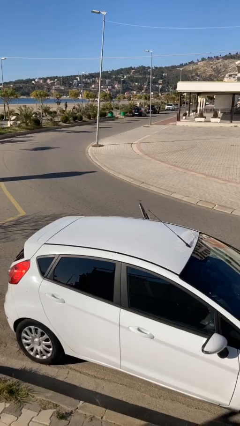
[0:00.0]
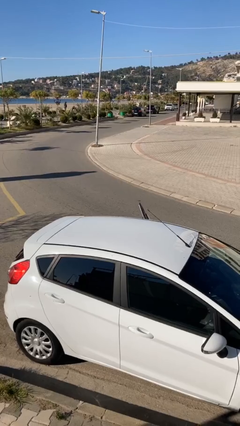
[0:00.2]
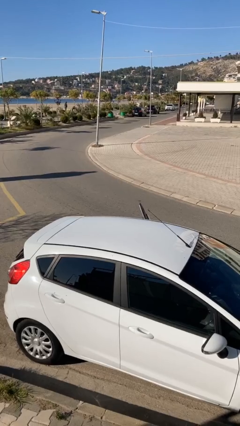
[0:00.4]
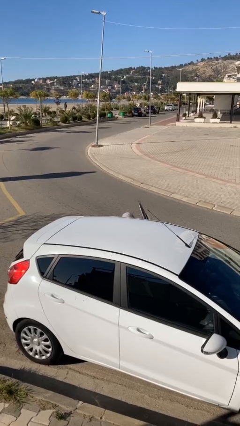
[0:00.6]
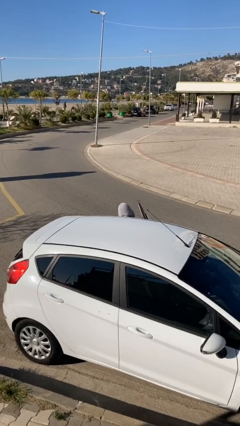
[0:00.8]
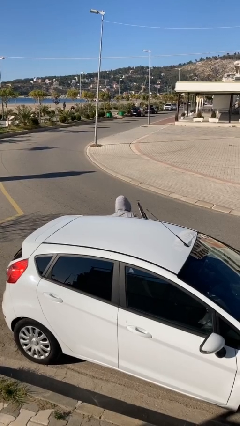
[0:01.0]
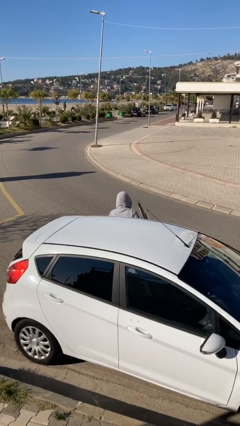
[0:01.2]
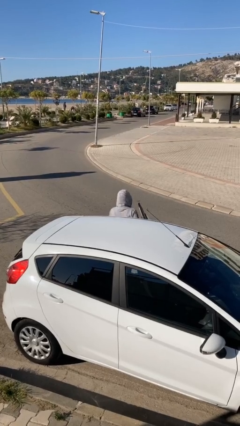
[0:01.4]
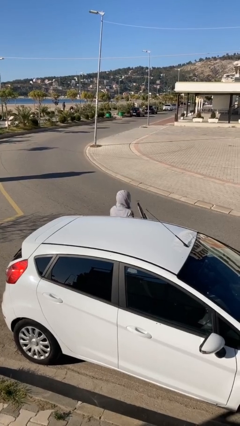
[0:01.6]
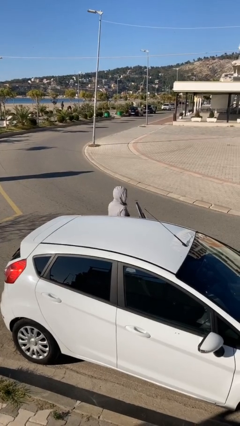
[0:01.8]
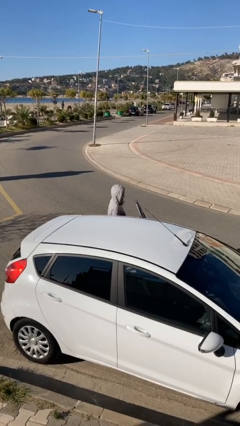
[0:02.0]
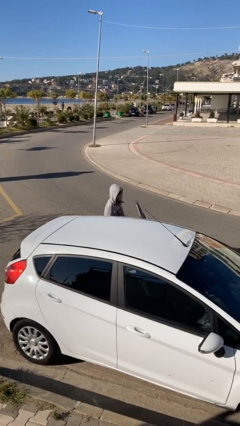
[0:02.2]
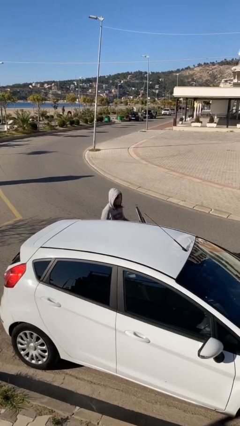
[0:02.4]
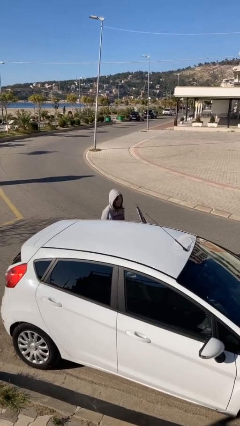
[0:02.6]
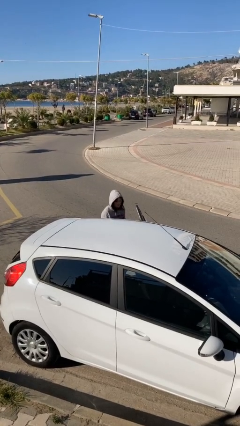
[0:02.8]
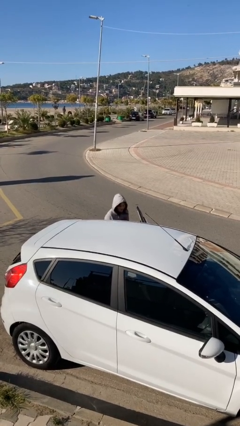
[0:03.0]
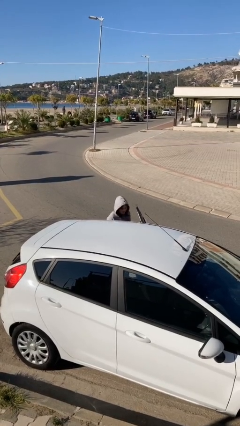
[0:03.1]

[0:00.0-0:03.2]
person exits car

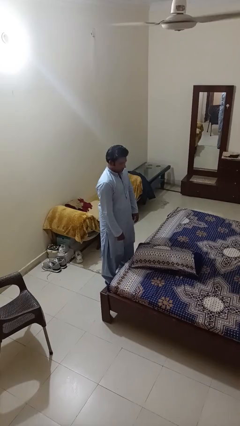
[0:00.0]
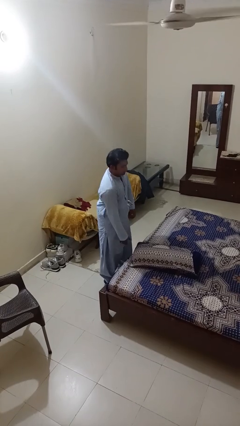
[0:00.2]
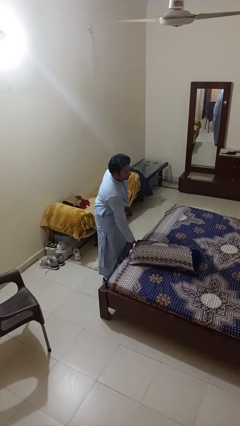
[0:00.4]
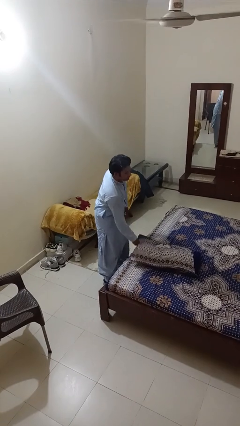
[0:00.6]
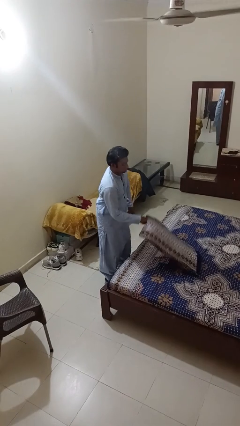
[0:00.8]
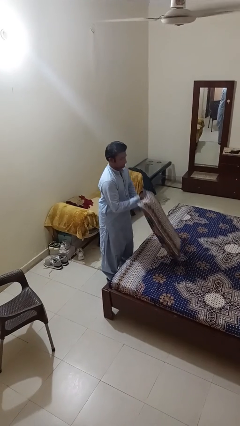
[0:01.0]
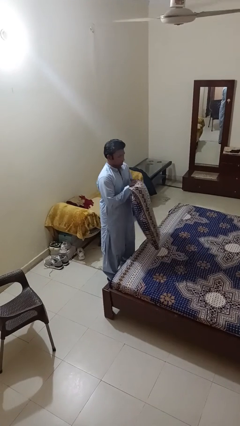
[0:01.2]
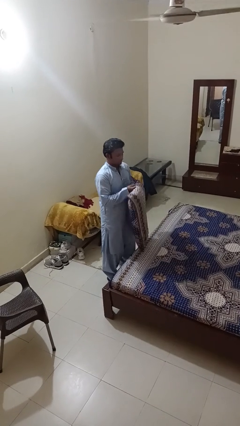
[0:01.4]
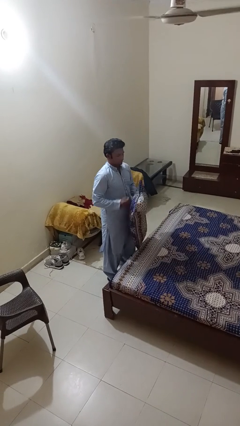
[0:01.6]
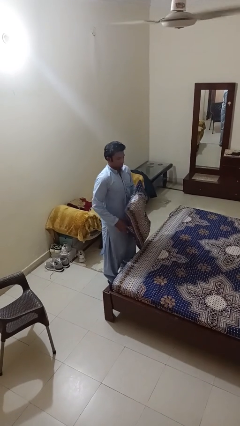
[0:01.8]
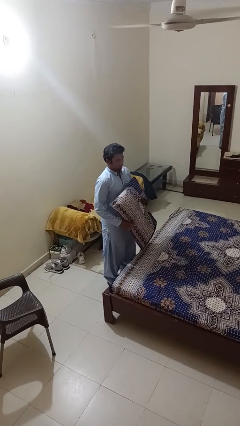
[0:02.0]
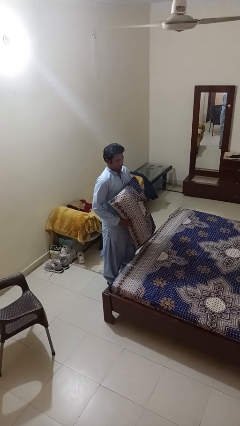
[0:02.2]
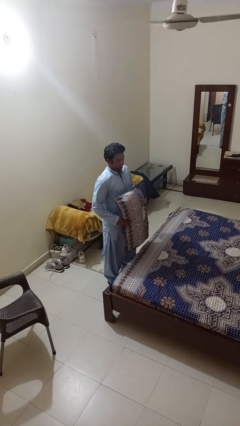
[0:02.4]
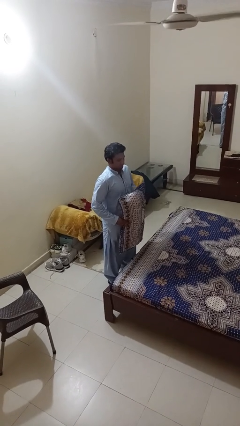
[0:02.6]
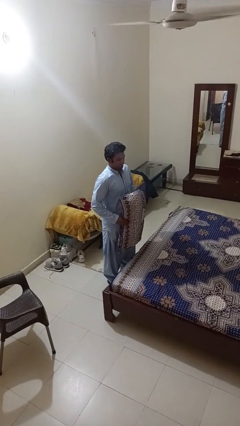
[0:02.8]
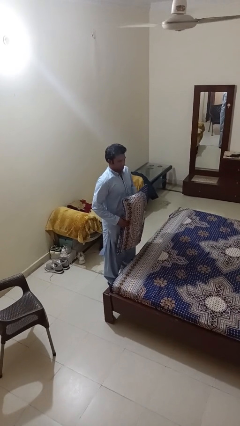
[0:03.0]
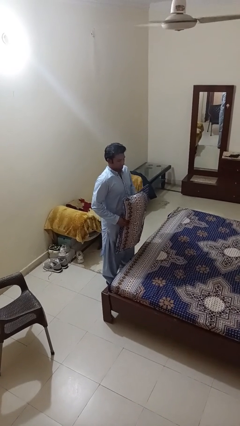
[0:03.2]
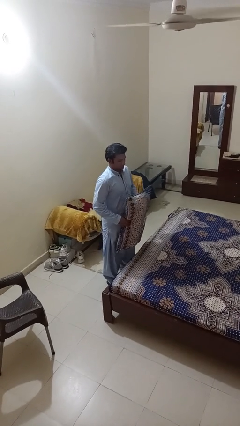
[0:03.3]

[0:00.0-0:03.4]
person picks up object from bed

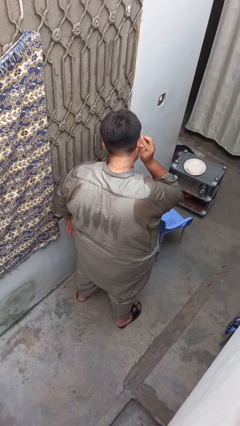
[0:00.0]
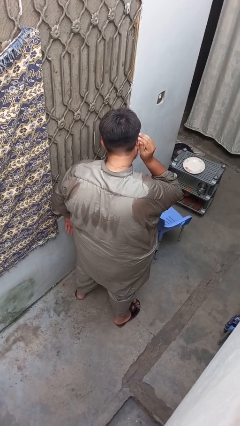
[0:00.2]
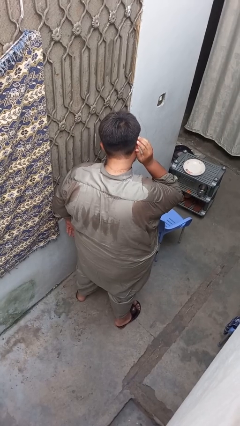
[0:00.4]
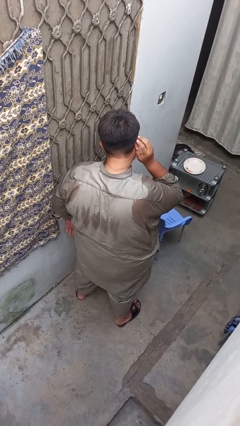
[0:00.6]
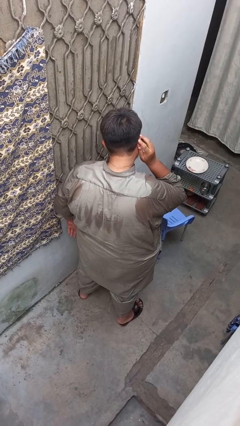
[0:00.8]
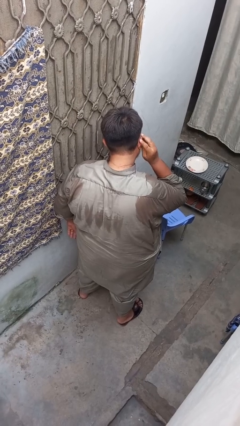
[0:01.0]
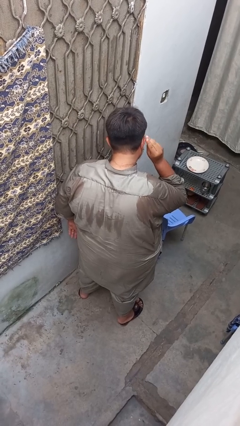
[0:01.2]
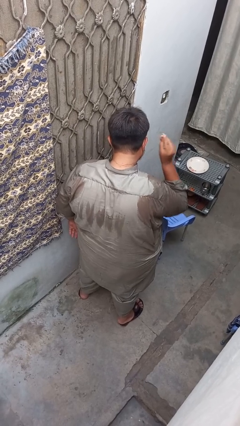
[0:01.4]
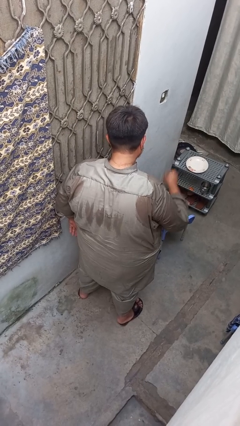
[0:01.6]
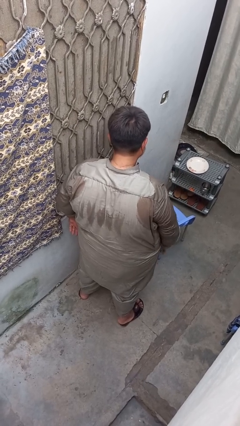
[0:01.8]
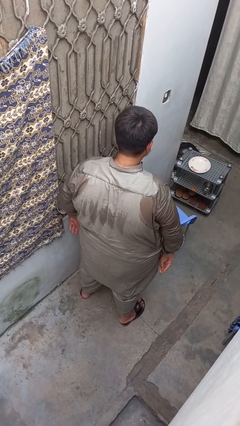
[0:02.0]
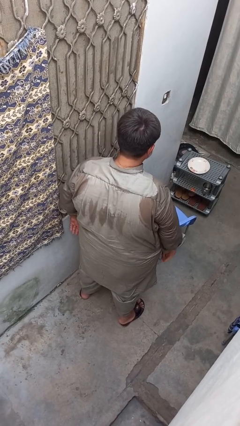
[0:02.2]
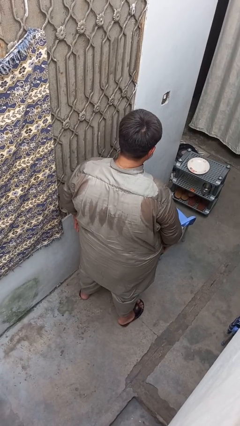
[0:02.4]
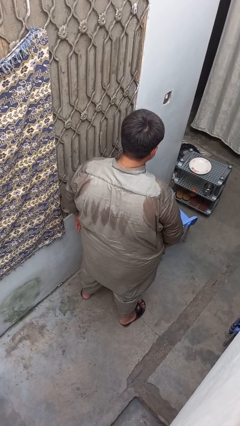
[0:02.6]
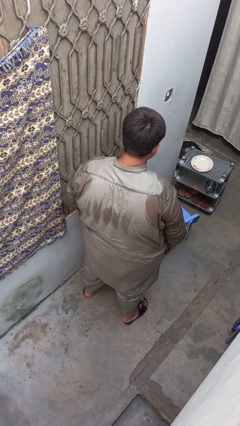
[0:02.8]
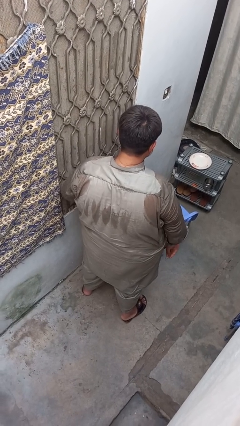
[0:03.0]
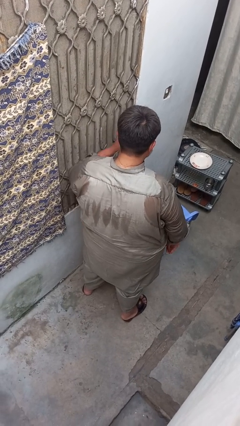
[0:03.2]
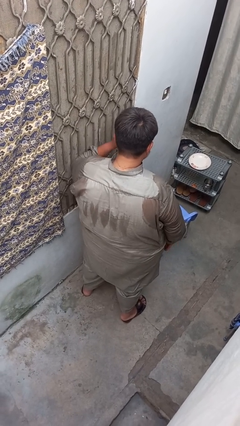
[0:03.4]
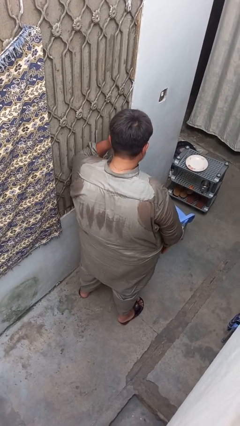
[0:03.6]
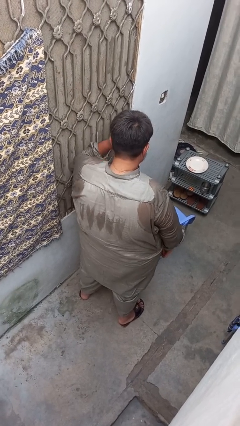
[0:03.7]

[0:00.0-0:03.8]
person takes off earrings

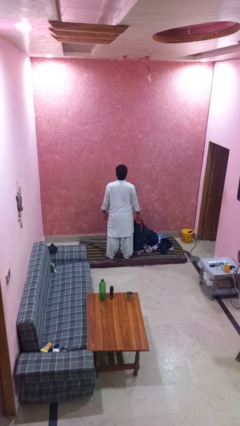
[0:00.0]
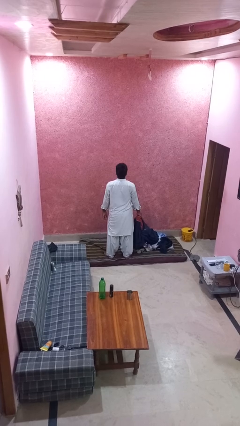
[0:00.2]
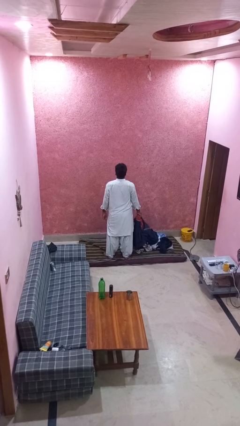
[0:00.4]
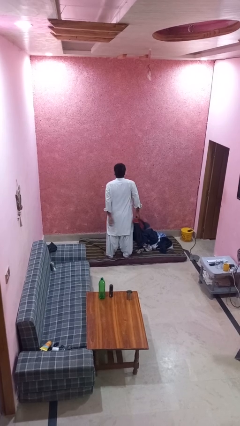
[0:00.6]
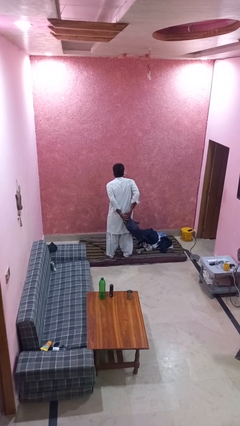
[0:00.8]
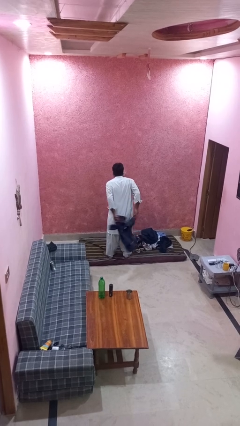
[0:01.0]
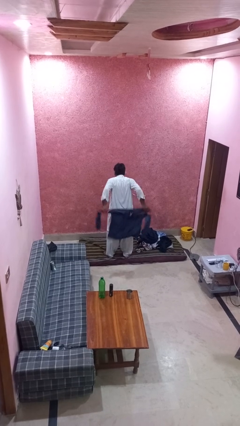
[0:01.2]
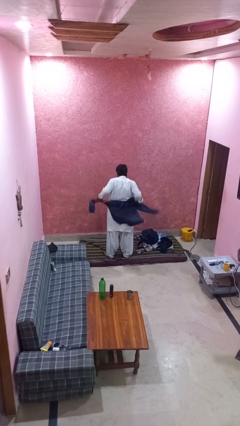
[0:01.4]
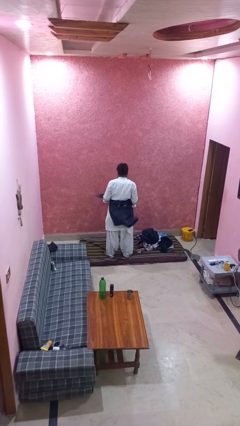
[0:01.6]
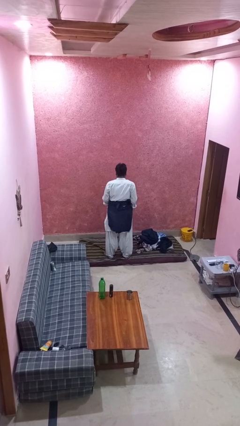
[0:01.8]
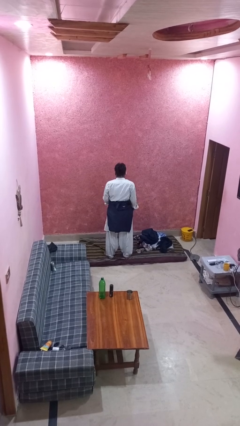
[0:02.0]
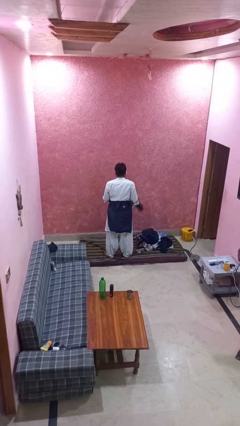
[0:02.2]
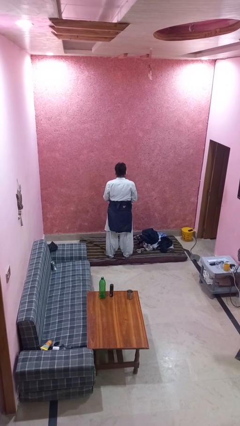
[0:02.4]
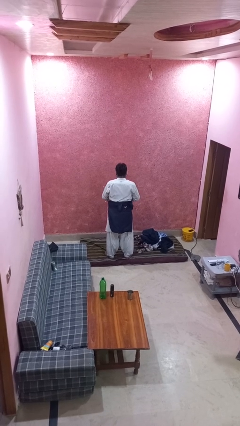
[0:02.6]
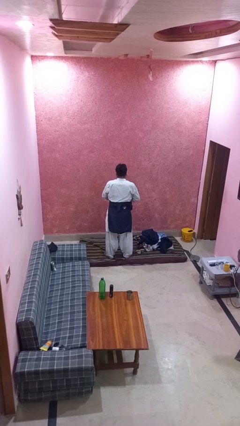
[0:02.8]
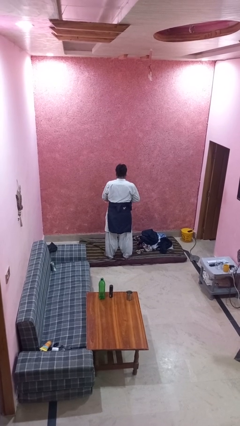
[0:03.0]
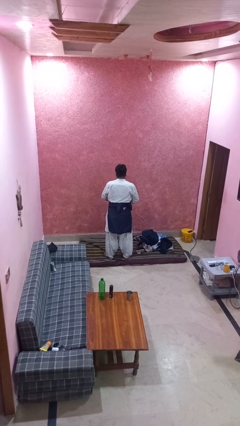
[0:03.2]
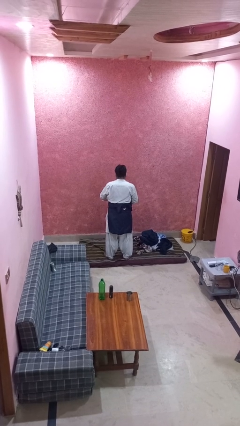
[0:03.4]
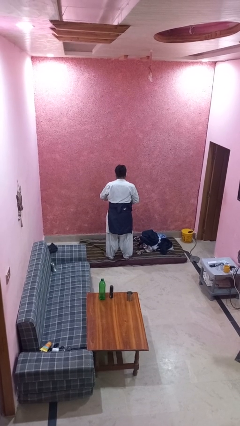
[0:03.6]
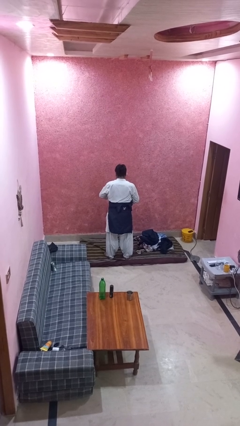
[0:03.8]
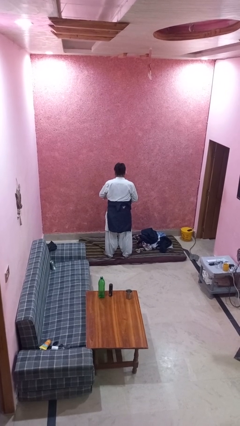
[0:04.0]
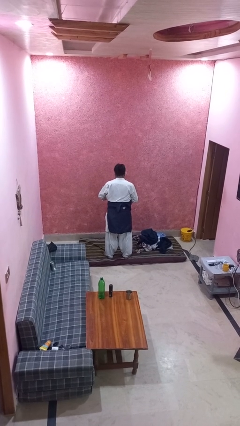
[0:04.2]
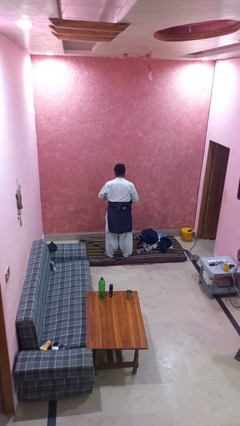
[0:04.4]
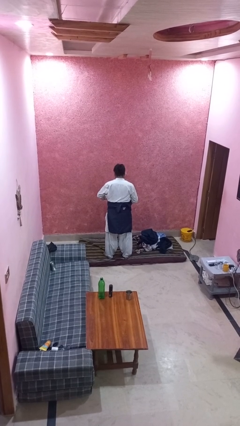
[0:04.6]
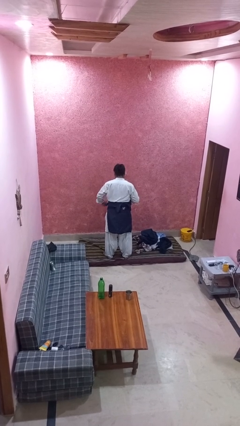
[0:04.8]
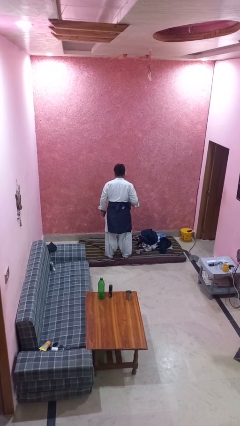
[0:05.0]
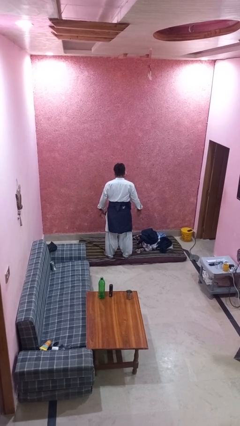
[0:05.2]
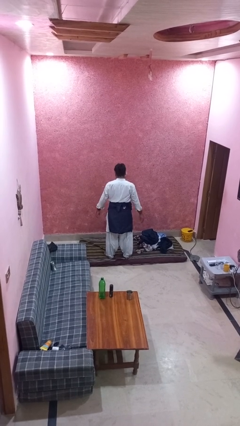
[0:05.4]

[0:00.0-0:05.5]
person ties jacket around waist

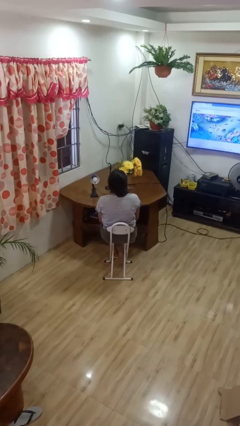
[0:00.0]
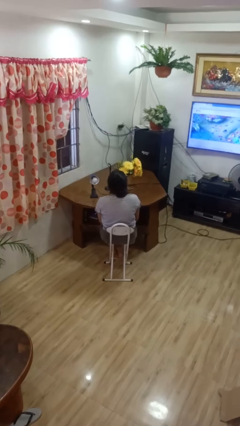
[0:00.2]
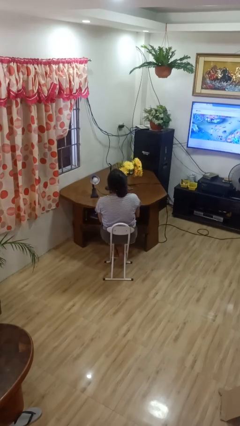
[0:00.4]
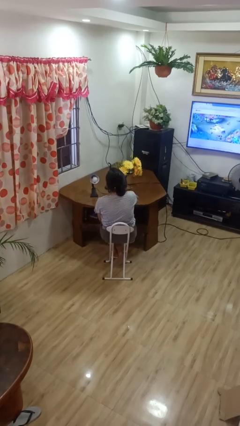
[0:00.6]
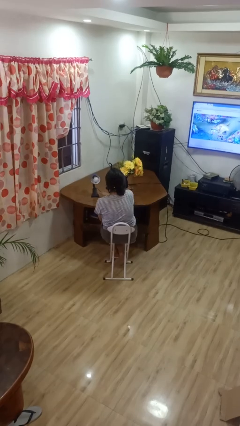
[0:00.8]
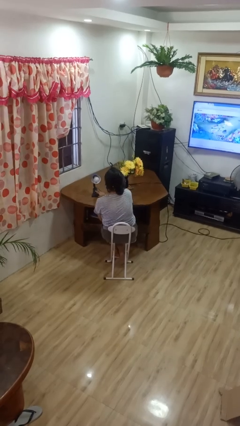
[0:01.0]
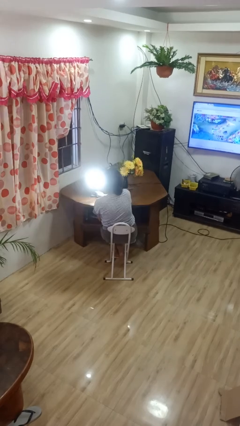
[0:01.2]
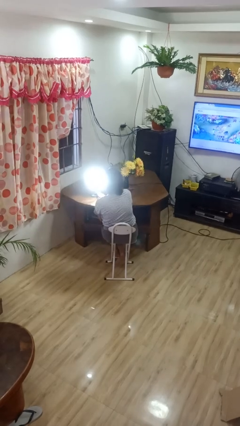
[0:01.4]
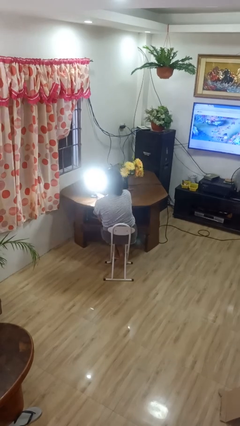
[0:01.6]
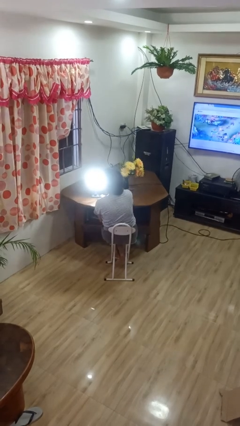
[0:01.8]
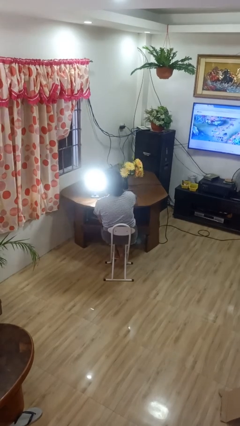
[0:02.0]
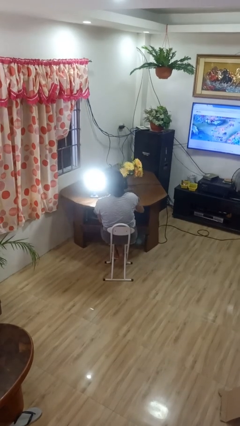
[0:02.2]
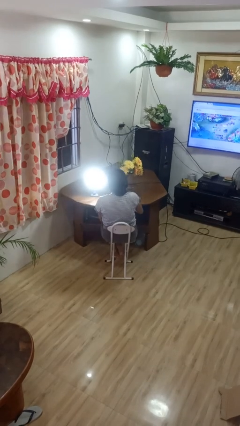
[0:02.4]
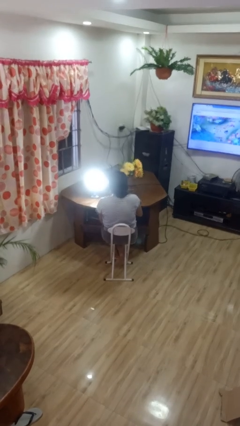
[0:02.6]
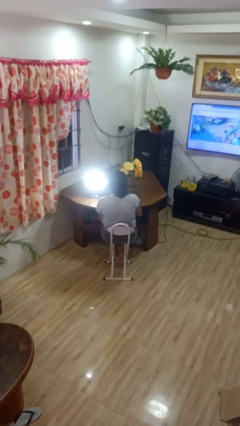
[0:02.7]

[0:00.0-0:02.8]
person turns on lamp
